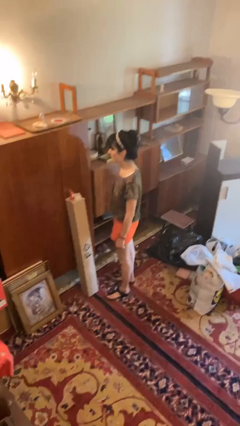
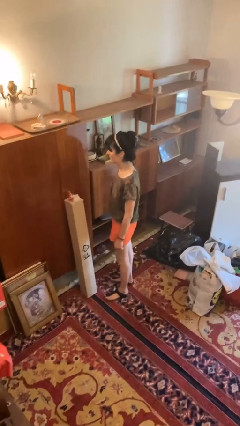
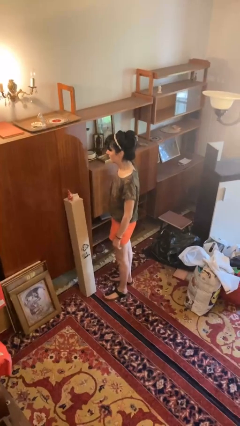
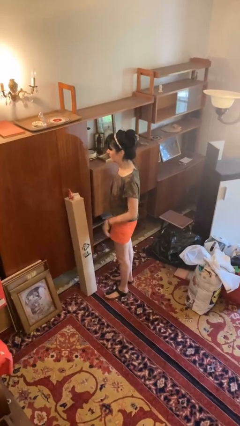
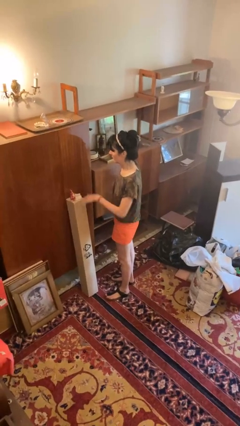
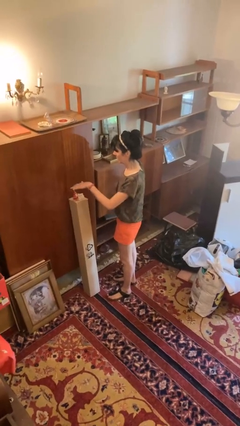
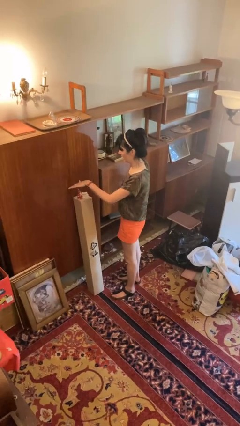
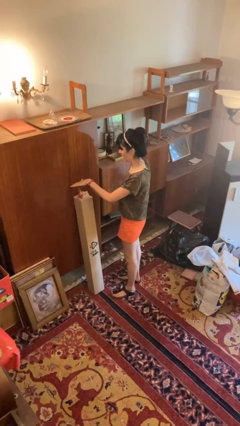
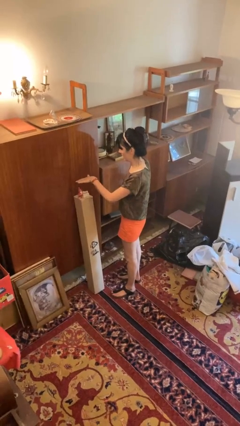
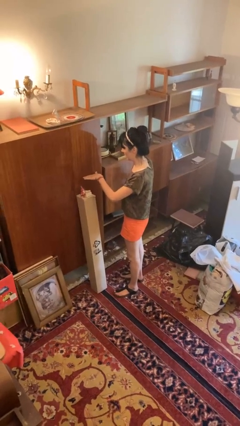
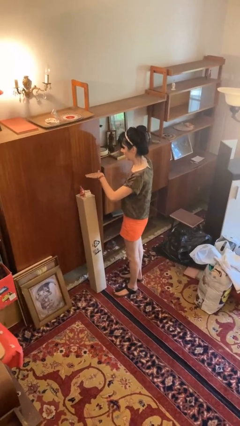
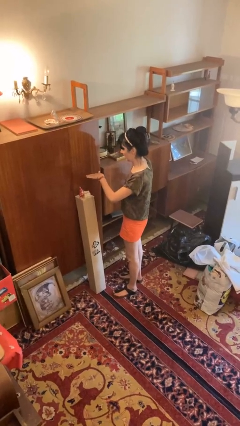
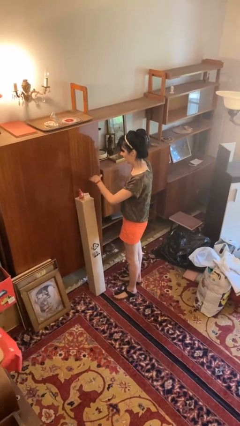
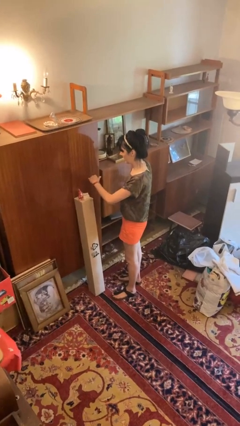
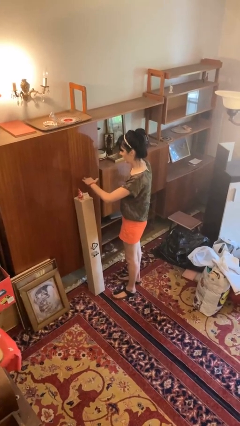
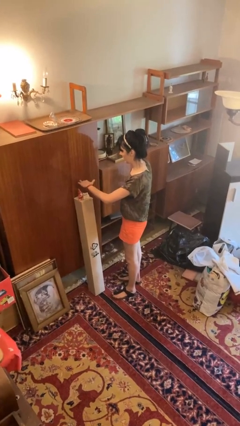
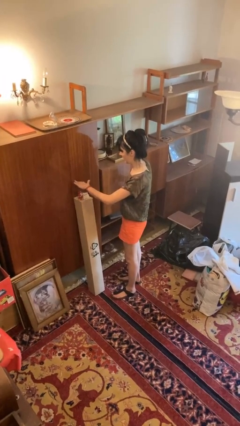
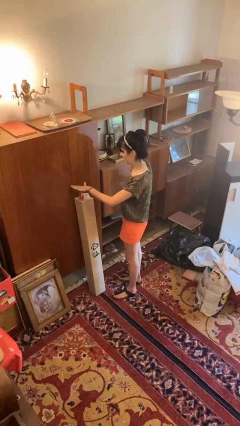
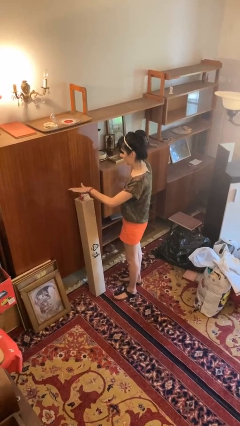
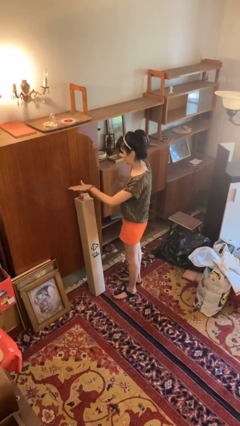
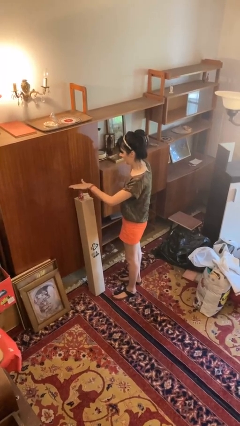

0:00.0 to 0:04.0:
person waves hand over object

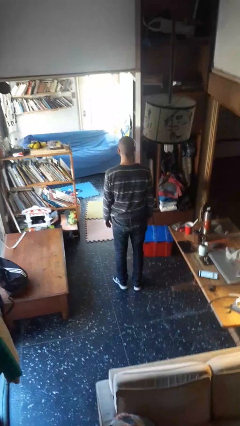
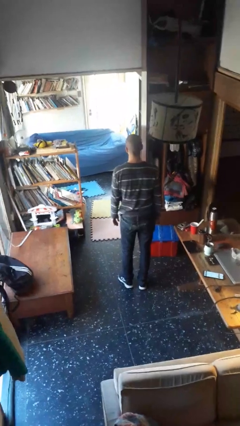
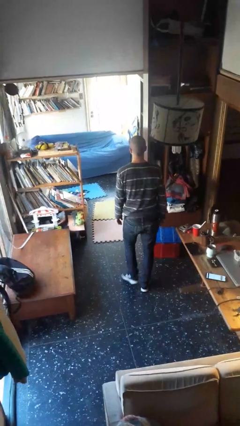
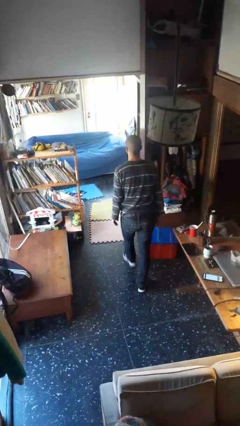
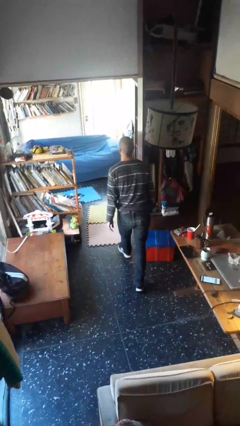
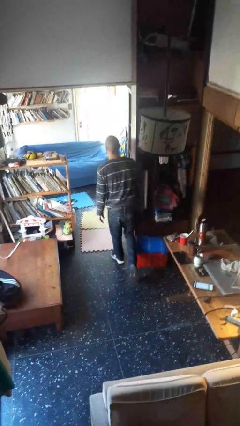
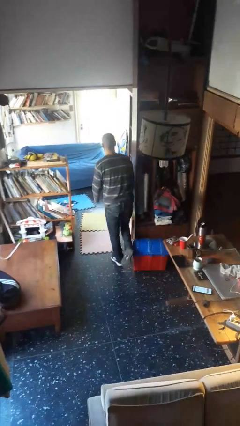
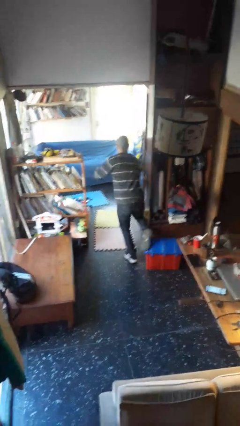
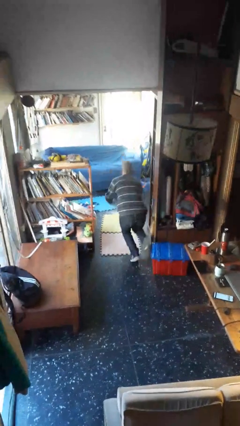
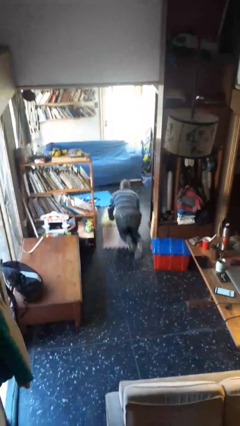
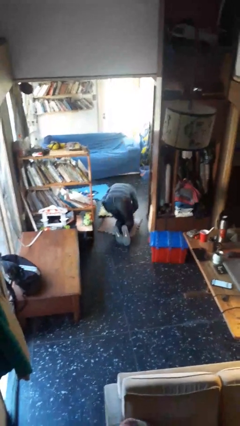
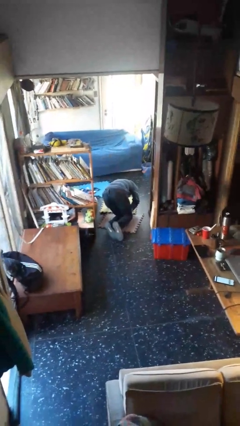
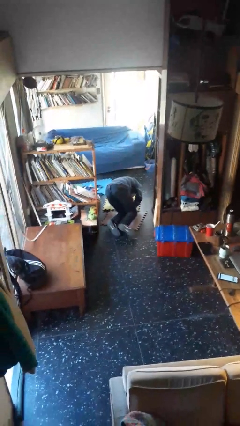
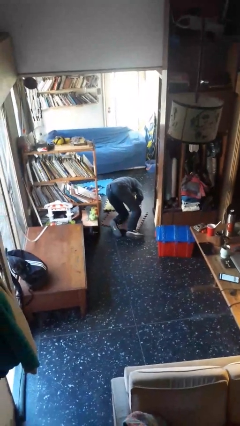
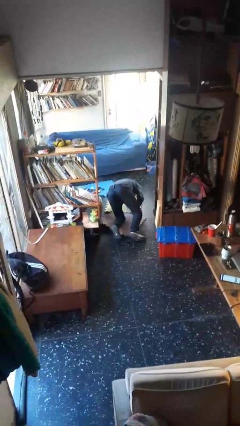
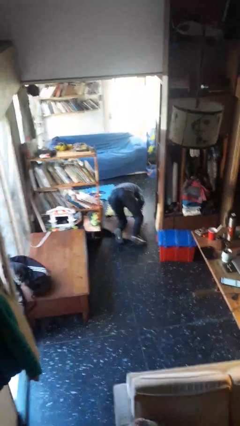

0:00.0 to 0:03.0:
person trips on object on floor

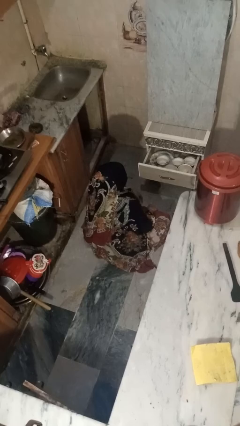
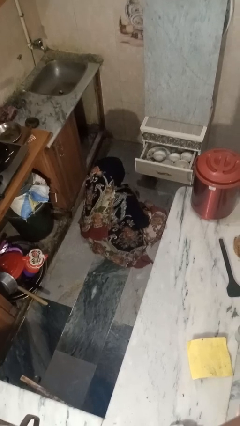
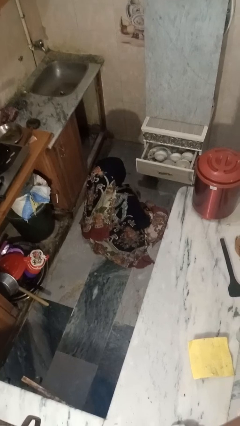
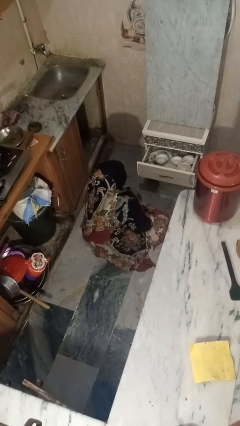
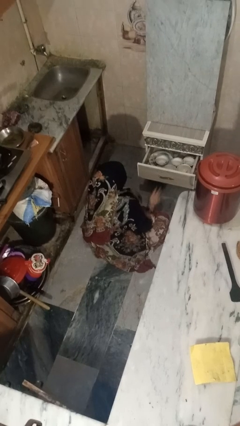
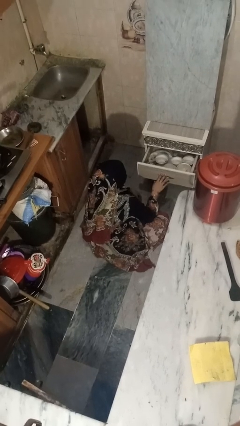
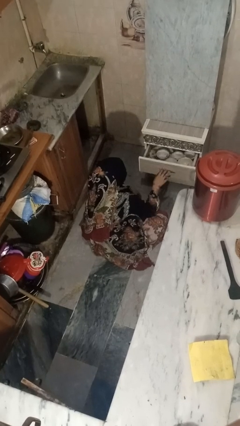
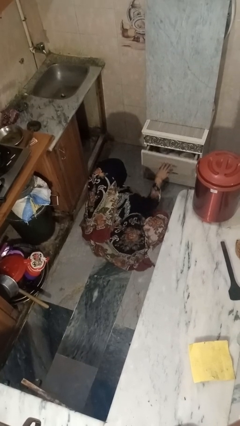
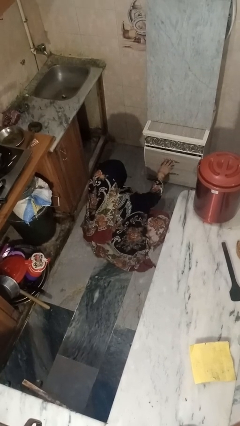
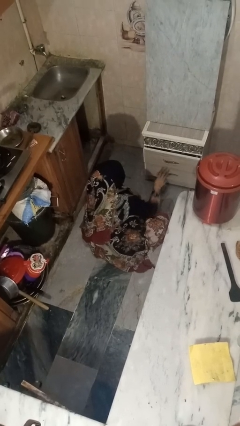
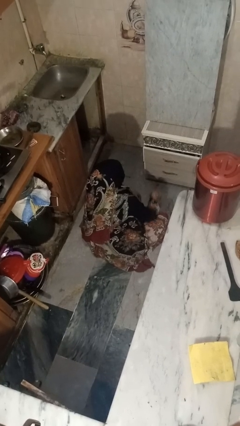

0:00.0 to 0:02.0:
person closes kitchen drawer

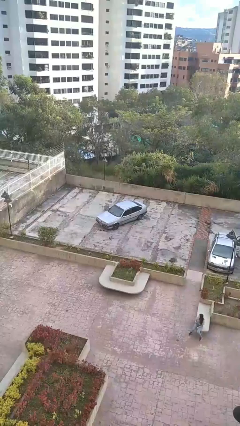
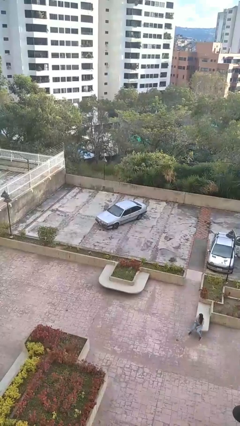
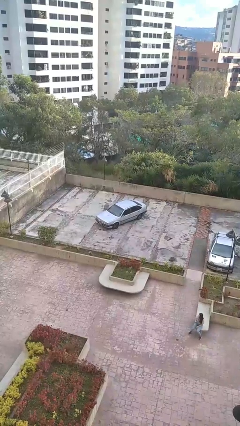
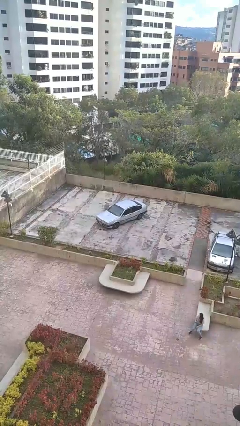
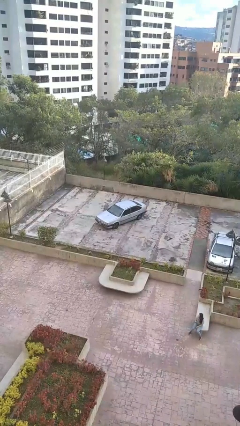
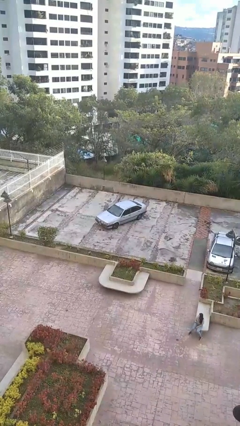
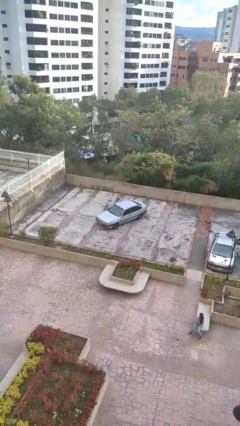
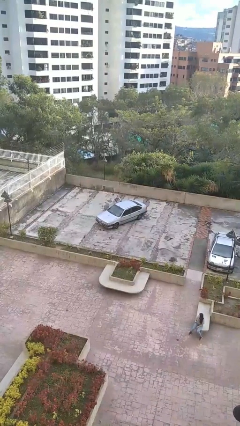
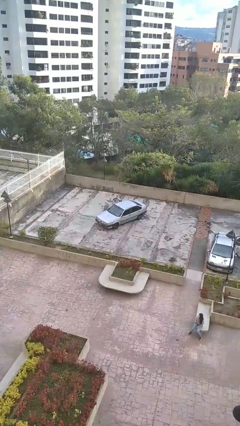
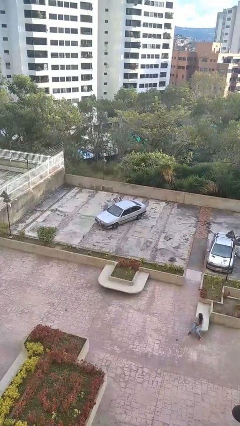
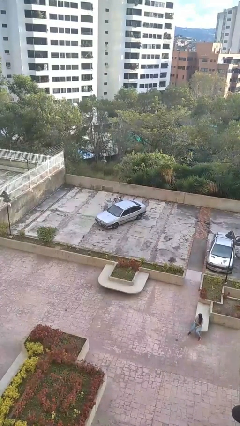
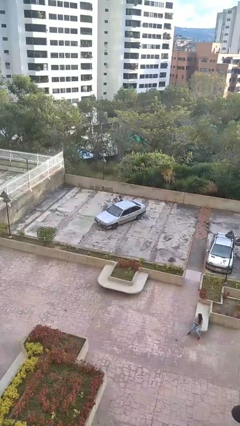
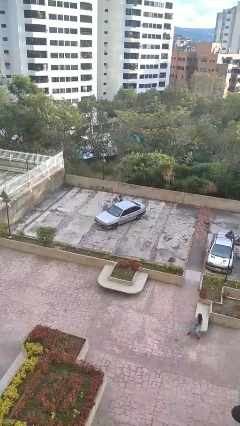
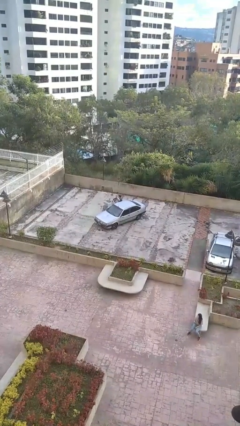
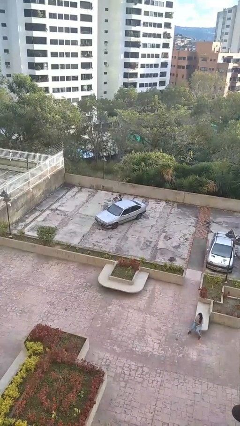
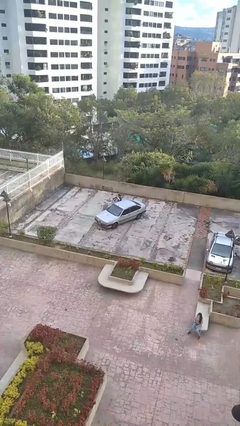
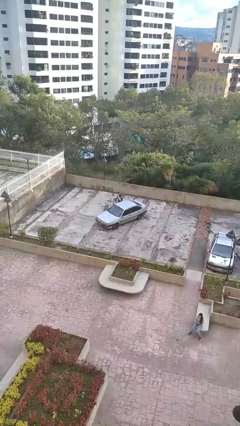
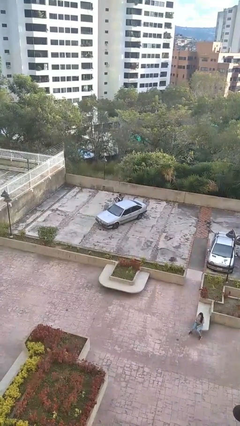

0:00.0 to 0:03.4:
car drops off person

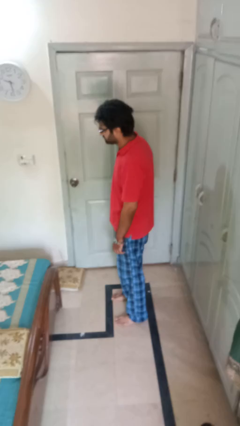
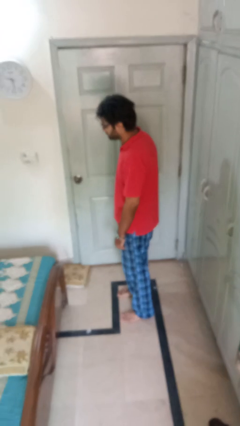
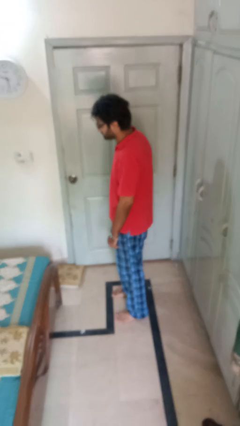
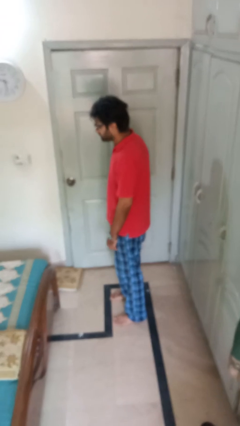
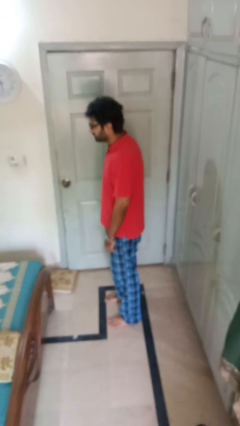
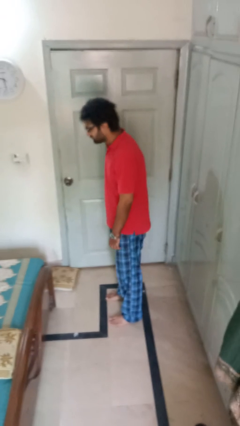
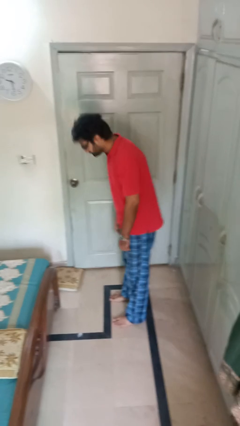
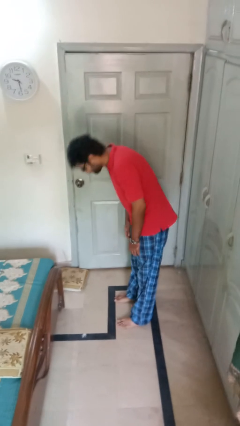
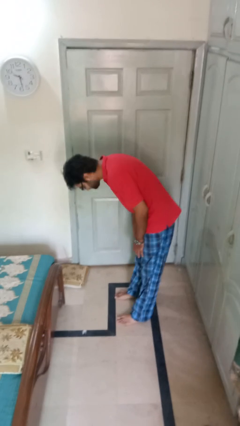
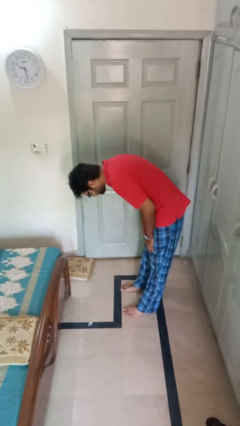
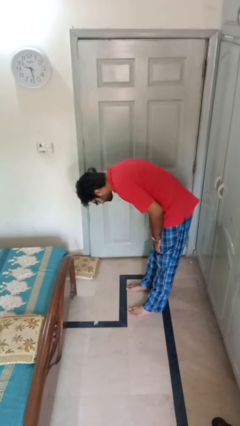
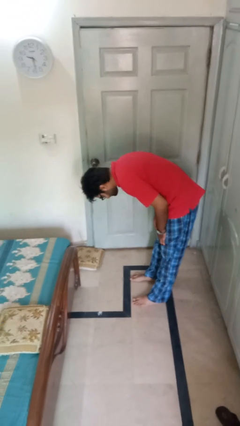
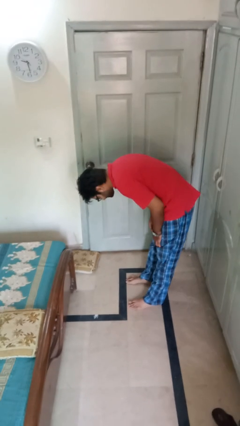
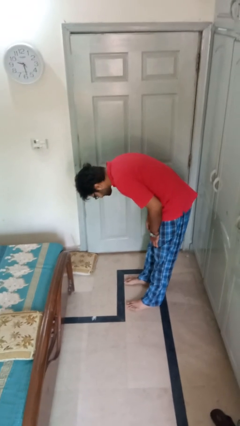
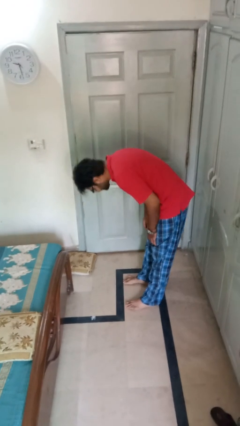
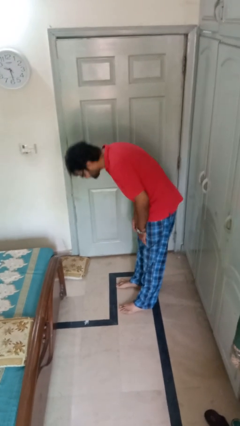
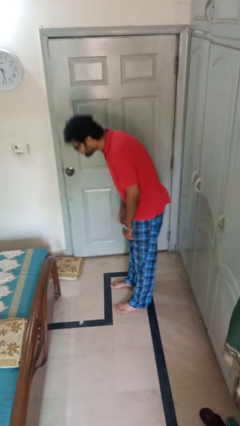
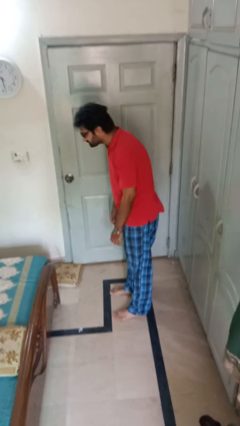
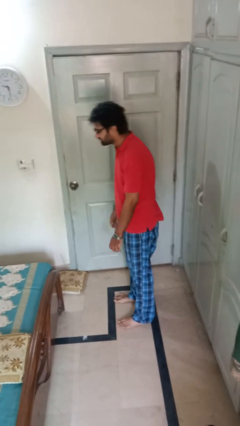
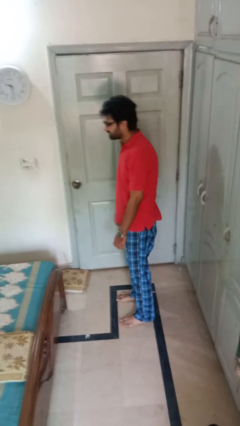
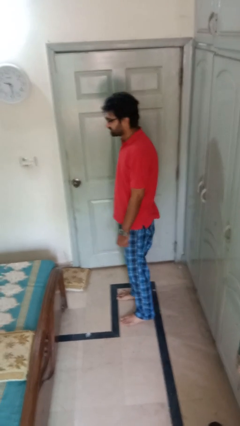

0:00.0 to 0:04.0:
person bows

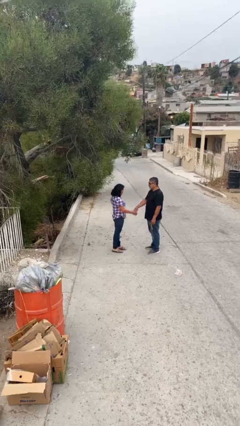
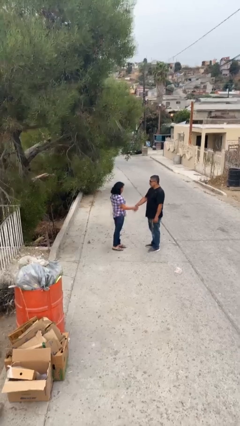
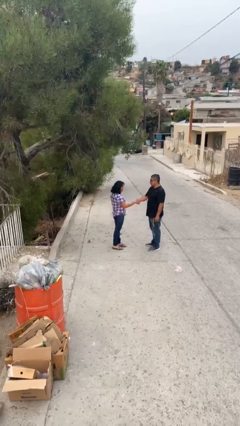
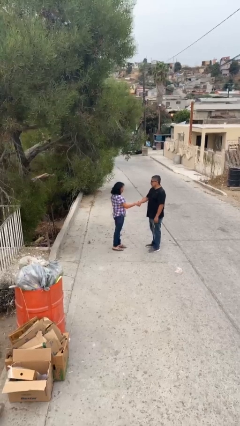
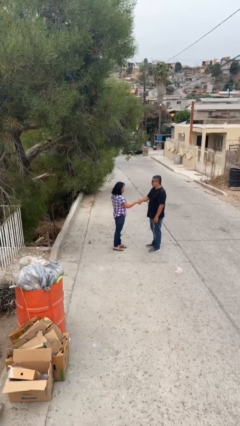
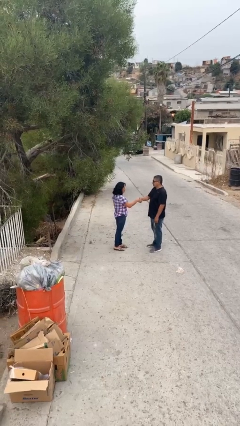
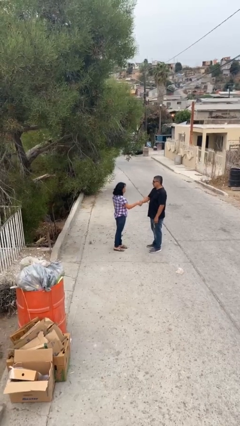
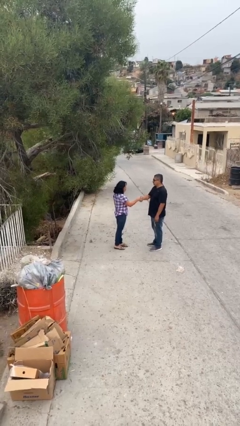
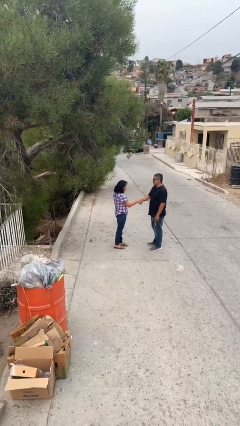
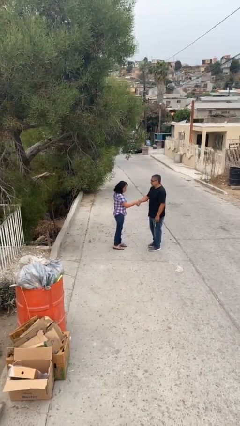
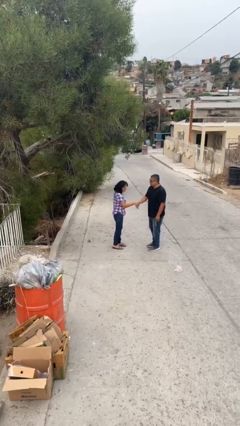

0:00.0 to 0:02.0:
person shakes hand
